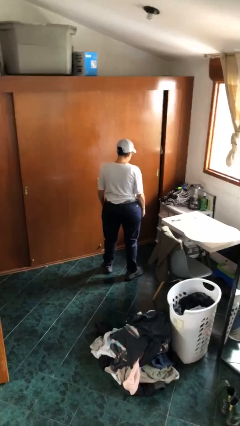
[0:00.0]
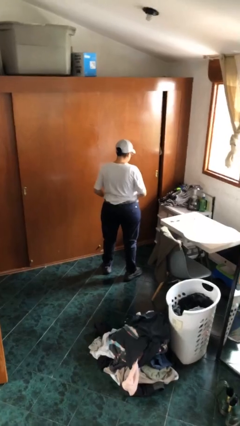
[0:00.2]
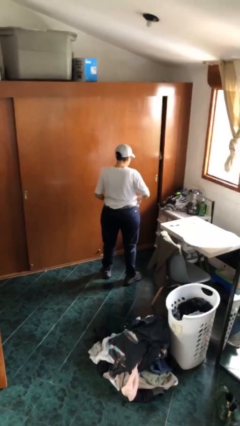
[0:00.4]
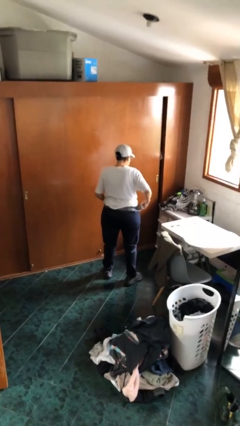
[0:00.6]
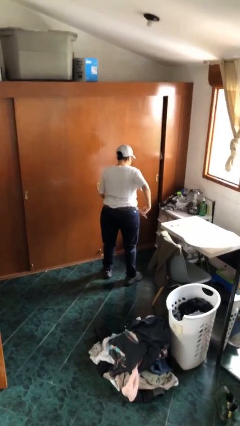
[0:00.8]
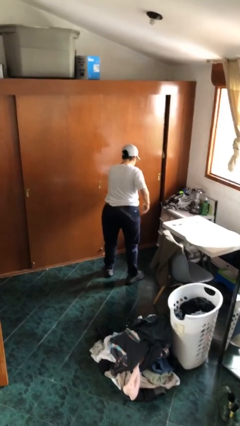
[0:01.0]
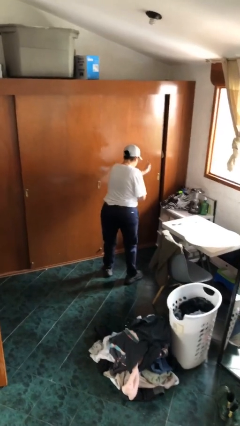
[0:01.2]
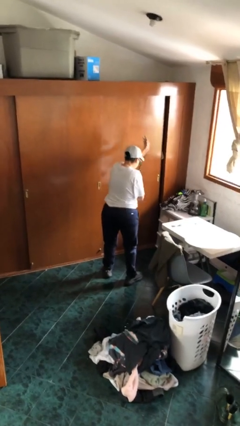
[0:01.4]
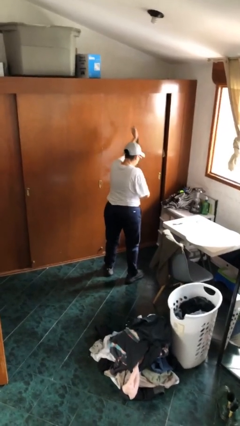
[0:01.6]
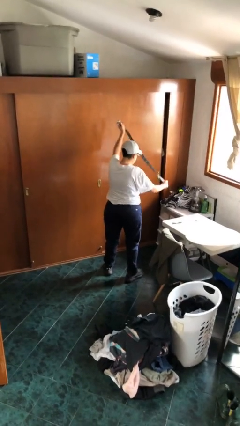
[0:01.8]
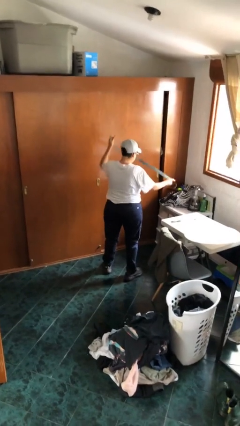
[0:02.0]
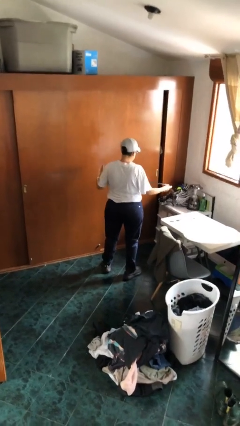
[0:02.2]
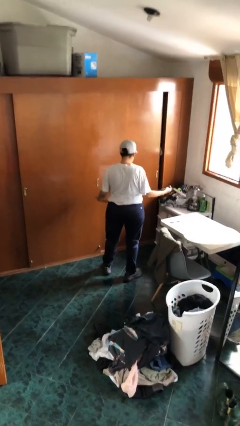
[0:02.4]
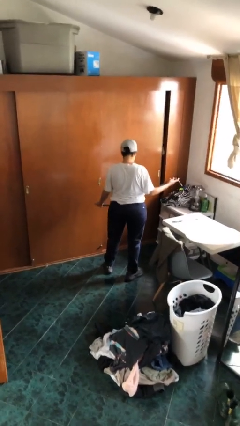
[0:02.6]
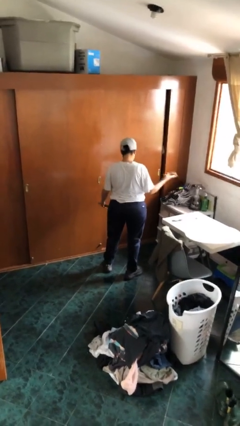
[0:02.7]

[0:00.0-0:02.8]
person takes off belt

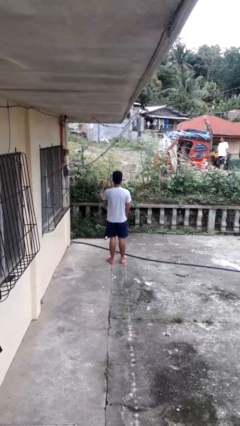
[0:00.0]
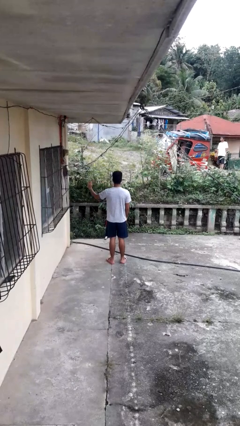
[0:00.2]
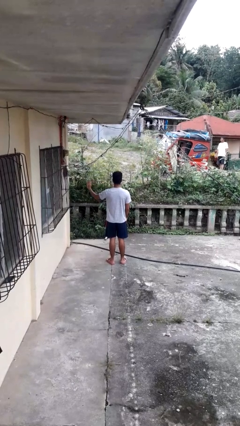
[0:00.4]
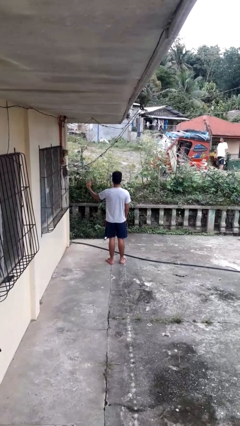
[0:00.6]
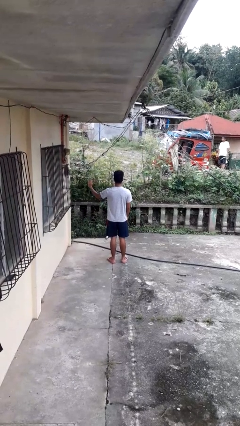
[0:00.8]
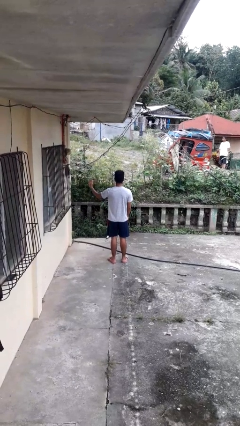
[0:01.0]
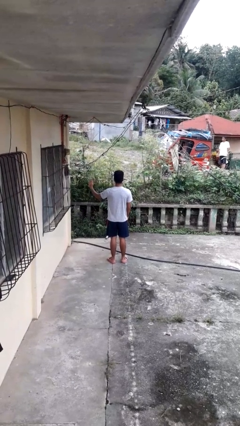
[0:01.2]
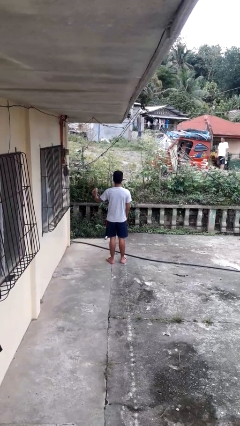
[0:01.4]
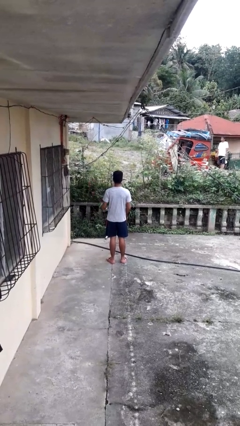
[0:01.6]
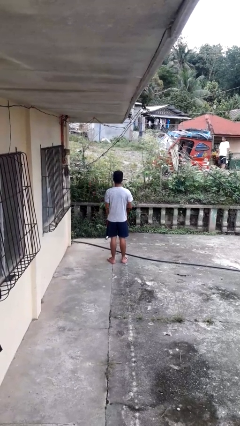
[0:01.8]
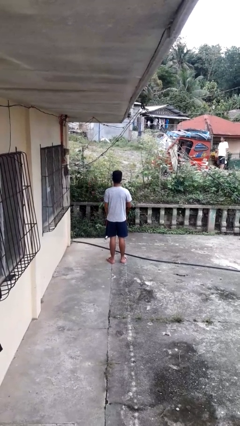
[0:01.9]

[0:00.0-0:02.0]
person gestures swipe left

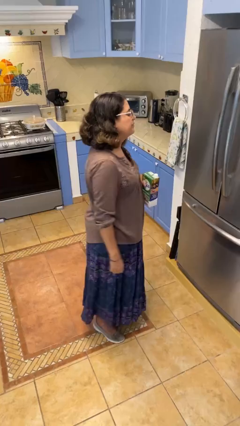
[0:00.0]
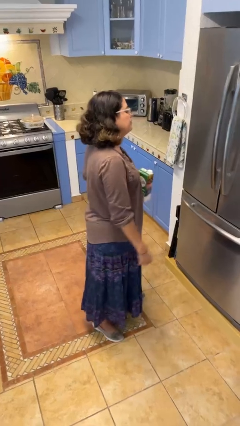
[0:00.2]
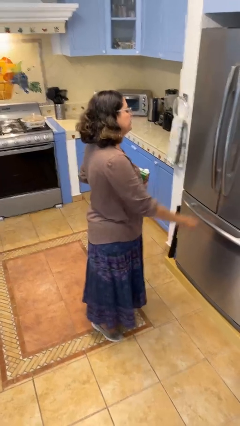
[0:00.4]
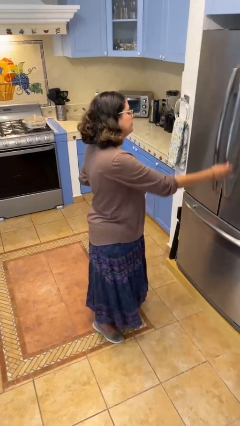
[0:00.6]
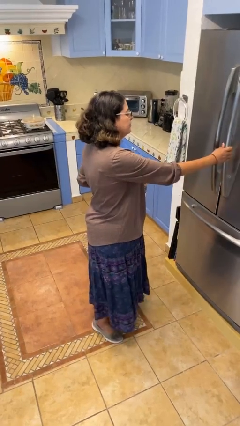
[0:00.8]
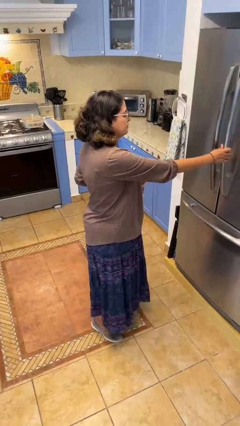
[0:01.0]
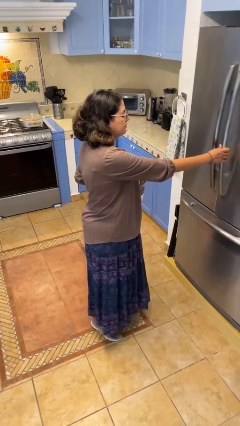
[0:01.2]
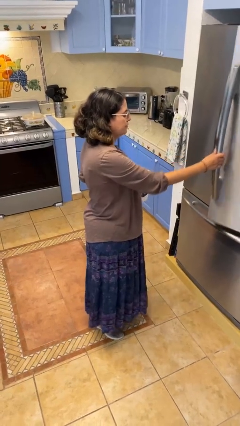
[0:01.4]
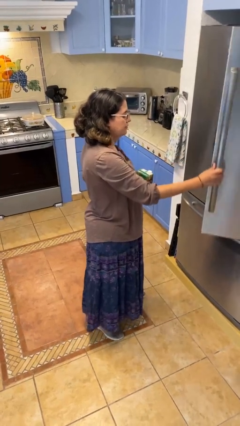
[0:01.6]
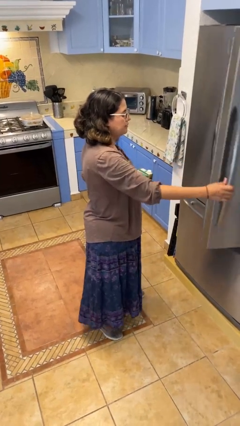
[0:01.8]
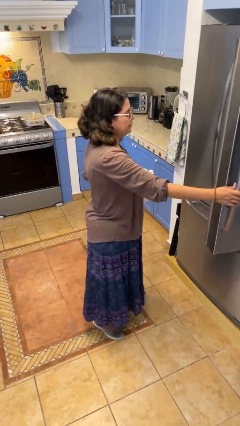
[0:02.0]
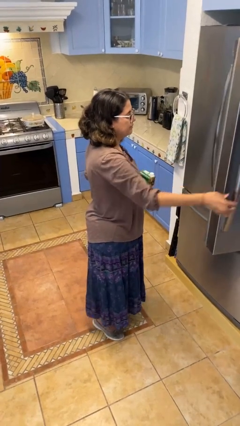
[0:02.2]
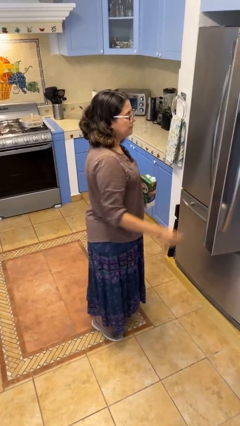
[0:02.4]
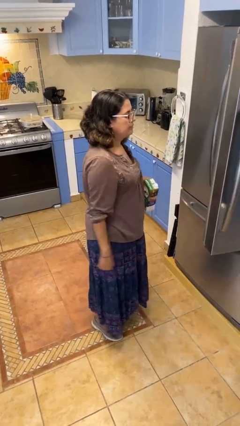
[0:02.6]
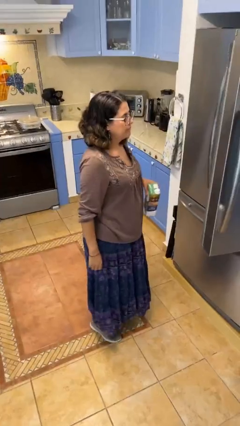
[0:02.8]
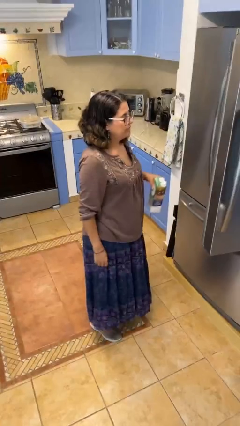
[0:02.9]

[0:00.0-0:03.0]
person opens refrigerator

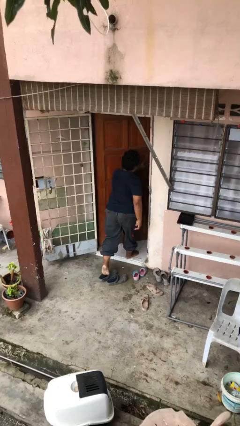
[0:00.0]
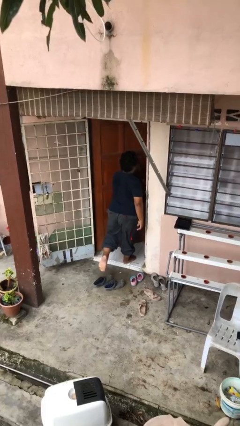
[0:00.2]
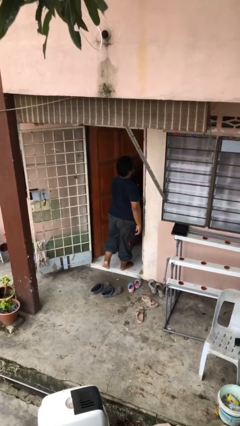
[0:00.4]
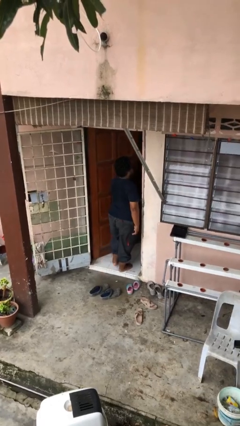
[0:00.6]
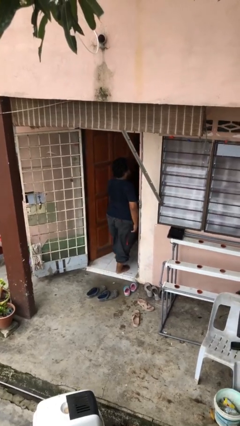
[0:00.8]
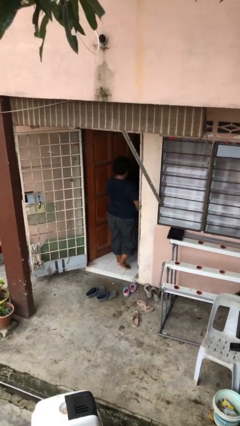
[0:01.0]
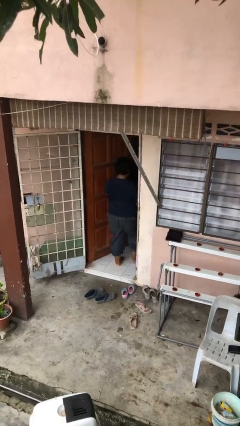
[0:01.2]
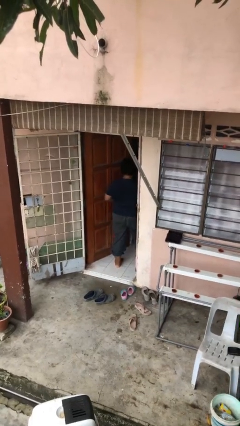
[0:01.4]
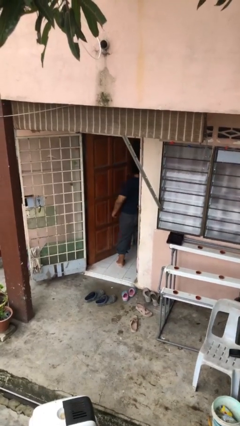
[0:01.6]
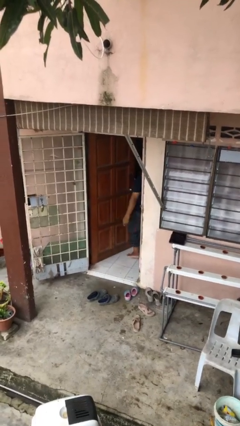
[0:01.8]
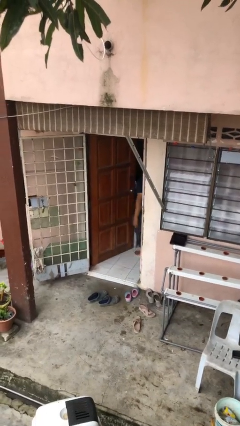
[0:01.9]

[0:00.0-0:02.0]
person exits scene through structure

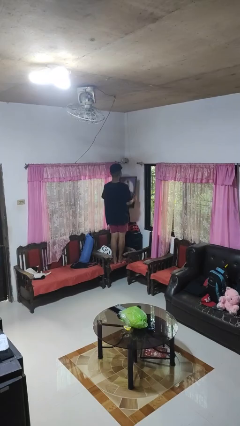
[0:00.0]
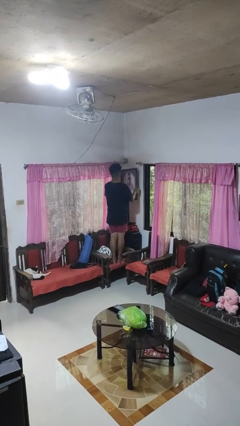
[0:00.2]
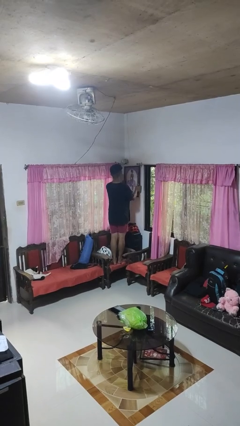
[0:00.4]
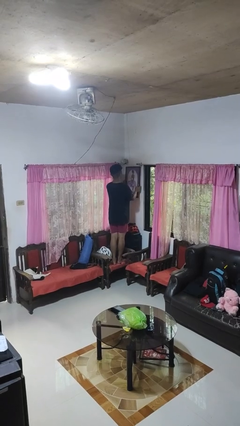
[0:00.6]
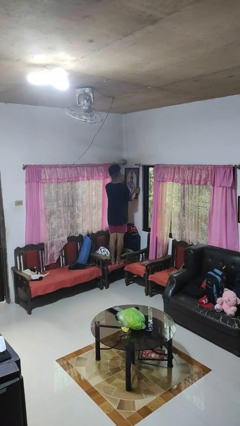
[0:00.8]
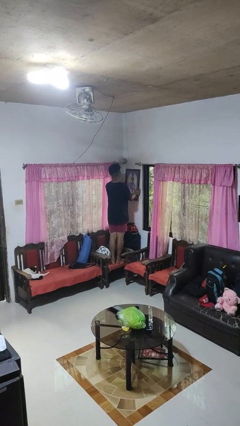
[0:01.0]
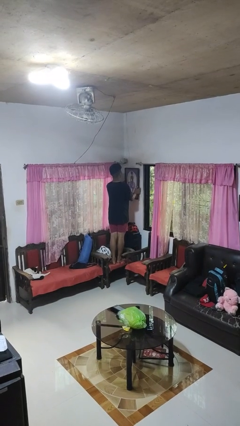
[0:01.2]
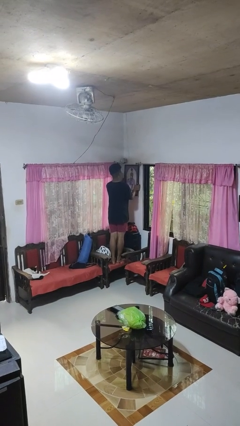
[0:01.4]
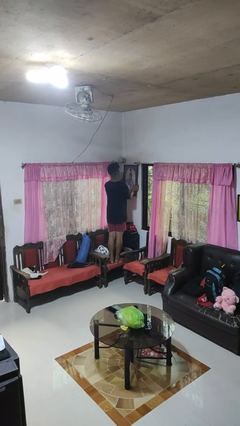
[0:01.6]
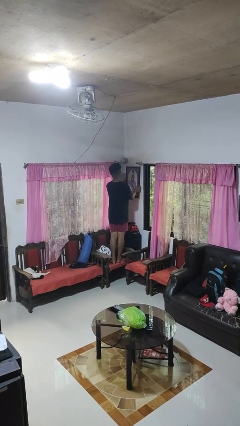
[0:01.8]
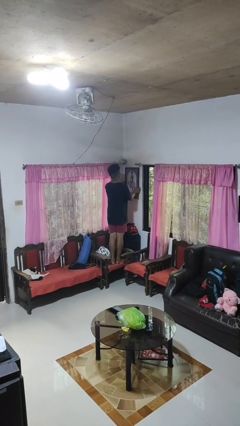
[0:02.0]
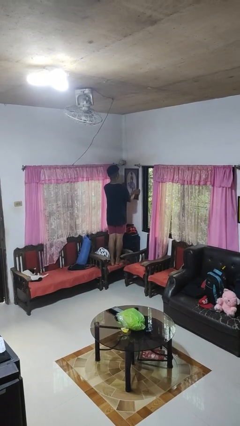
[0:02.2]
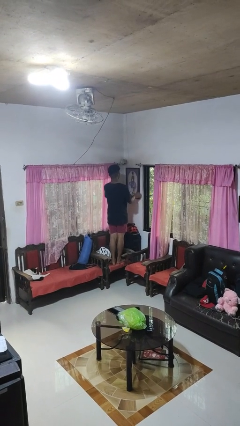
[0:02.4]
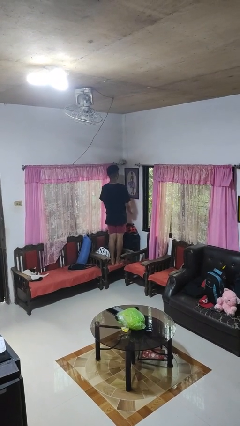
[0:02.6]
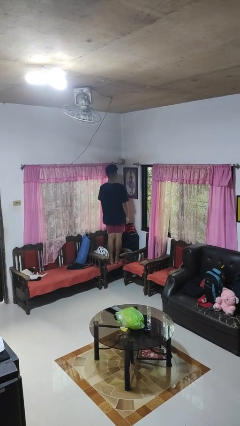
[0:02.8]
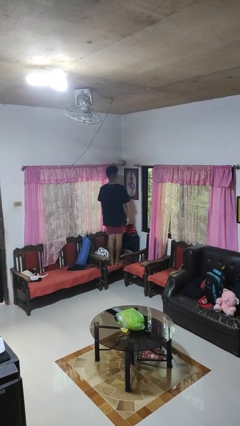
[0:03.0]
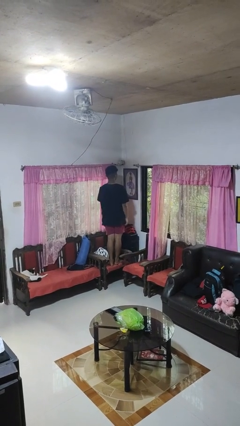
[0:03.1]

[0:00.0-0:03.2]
person puts up picture frame

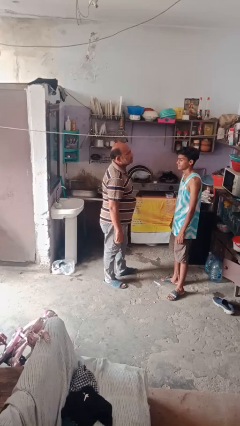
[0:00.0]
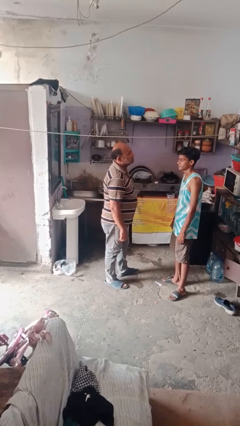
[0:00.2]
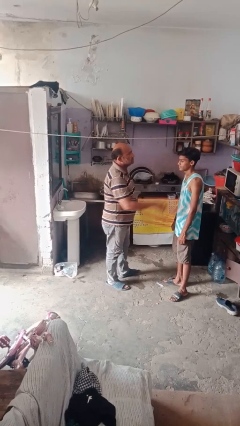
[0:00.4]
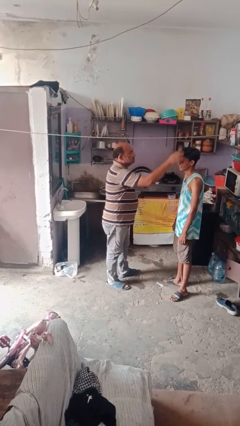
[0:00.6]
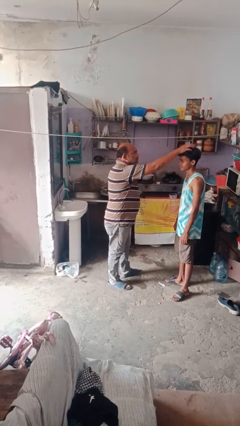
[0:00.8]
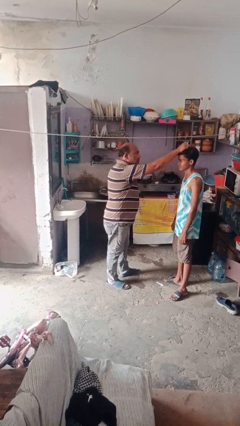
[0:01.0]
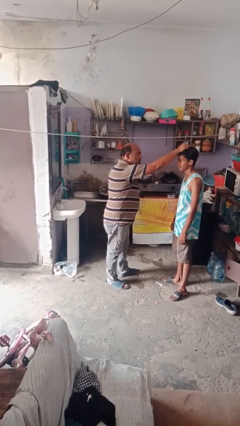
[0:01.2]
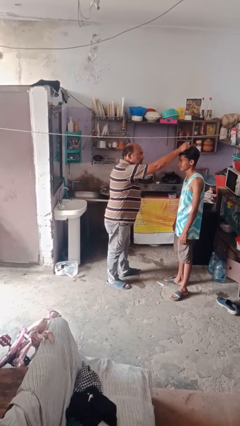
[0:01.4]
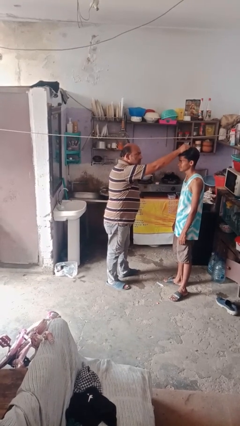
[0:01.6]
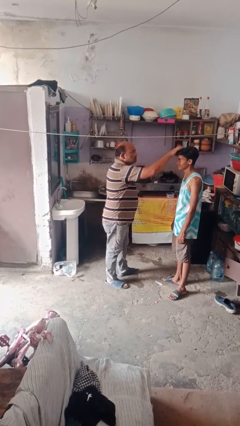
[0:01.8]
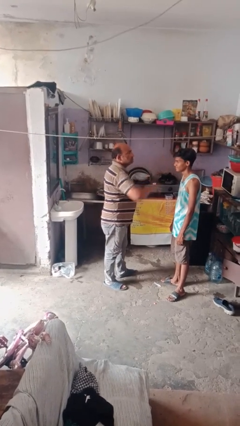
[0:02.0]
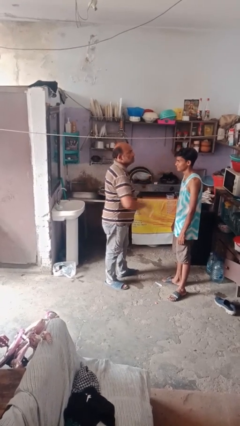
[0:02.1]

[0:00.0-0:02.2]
person grabs person by hair

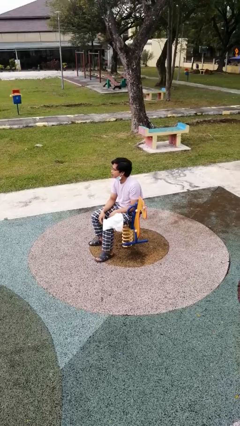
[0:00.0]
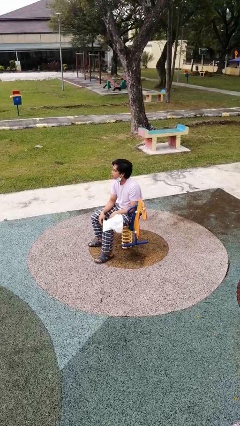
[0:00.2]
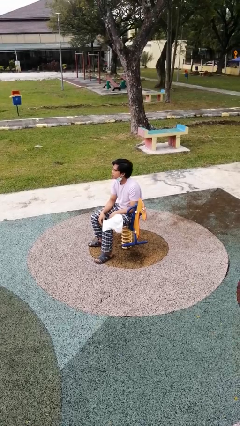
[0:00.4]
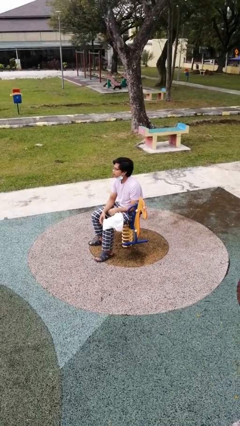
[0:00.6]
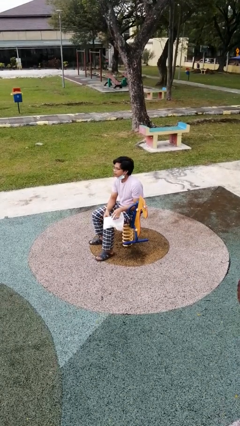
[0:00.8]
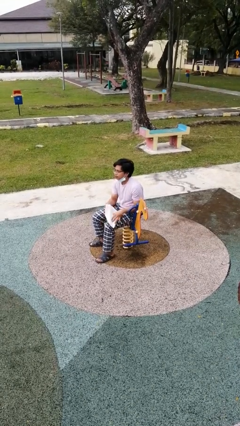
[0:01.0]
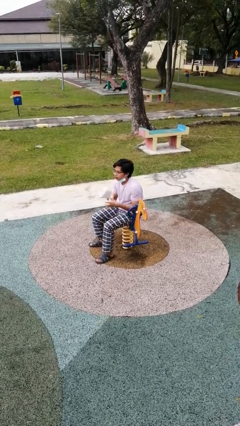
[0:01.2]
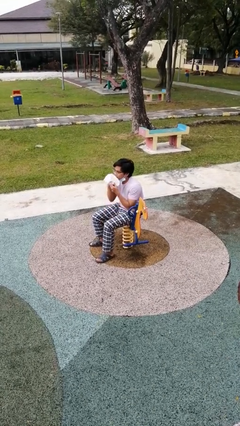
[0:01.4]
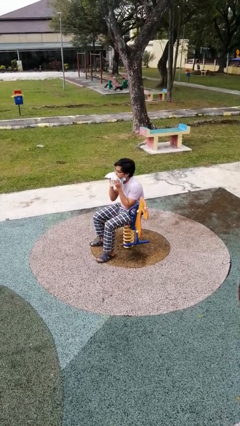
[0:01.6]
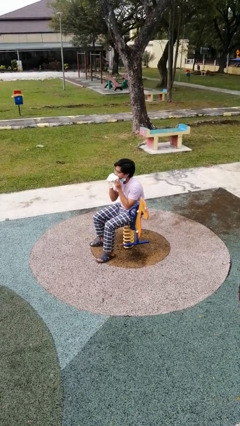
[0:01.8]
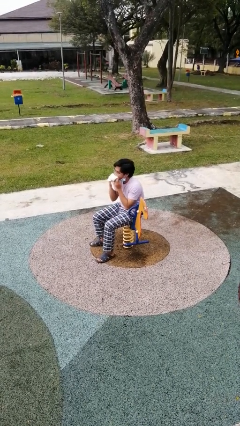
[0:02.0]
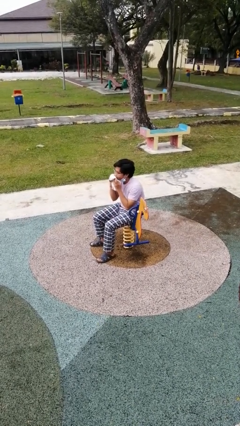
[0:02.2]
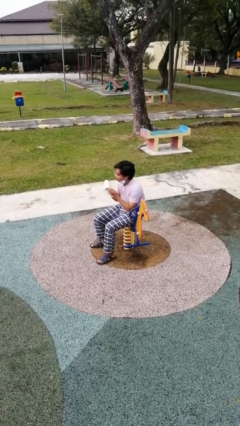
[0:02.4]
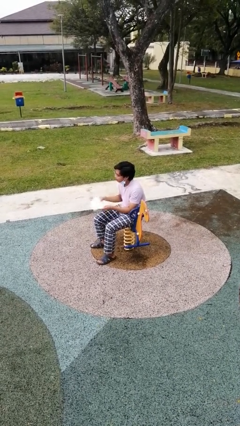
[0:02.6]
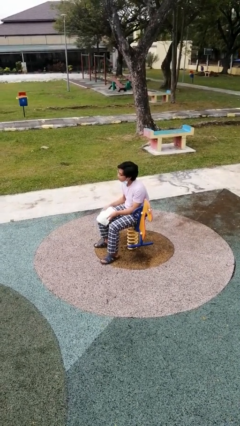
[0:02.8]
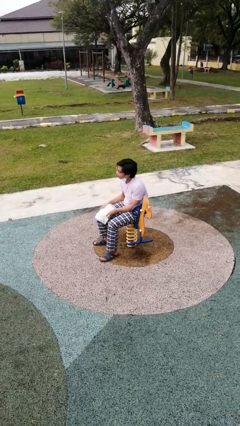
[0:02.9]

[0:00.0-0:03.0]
person wipes mouth with napkin
